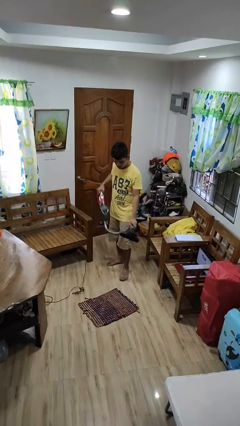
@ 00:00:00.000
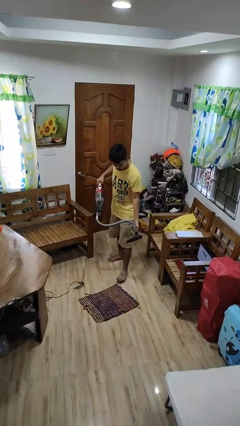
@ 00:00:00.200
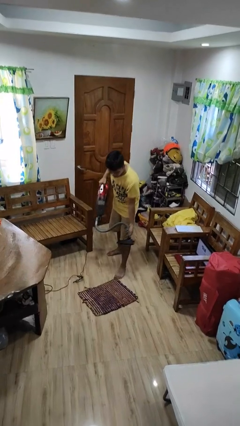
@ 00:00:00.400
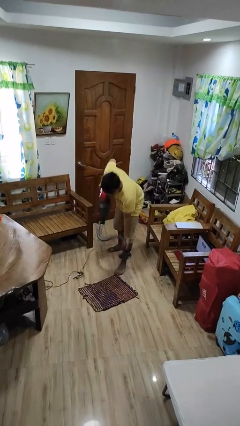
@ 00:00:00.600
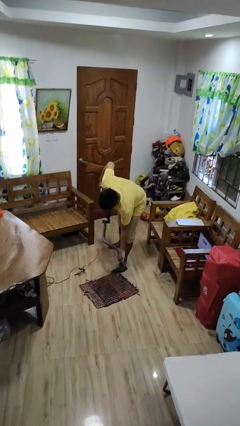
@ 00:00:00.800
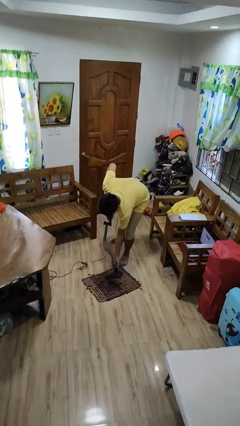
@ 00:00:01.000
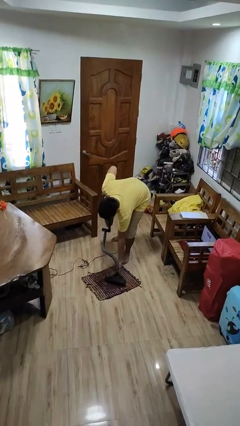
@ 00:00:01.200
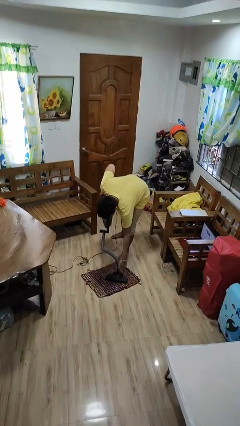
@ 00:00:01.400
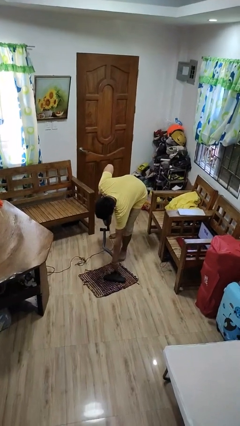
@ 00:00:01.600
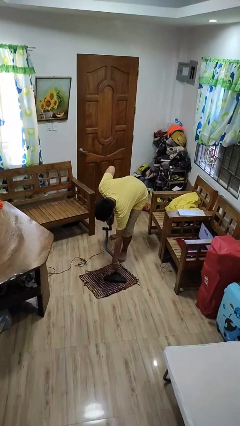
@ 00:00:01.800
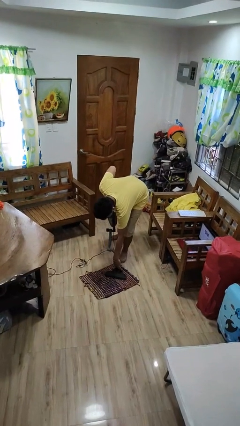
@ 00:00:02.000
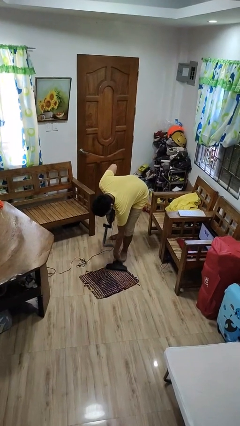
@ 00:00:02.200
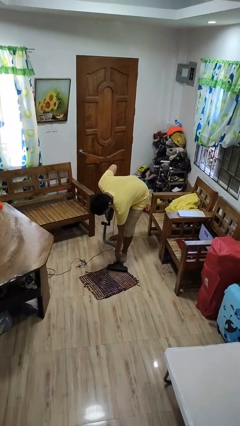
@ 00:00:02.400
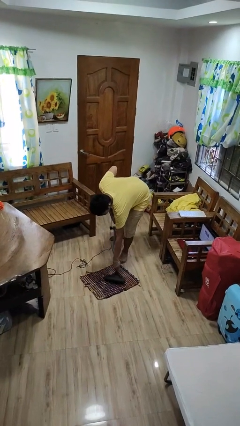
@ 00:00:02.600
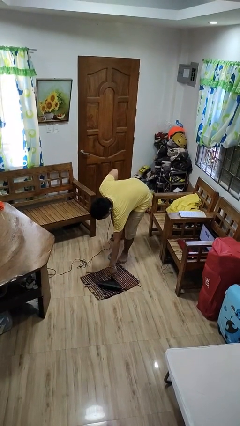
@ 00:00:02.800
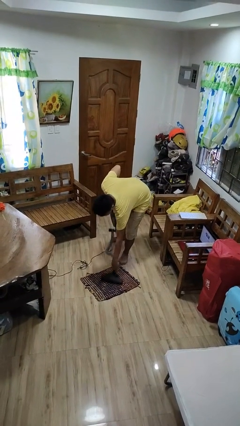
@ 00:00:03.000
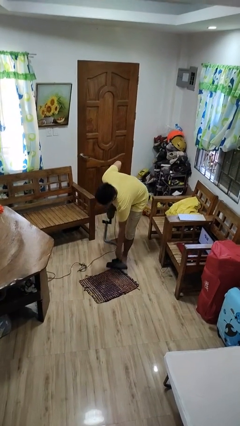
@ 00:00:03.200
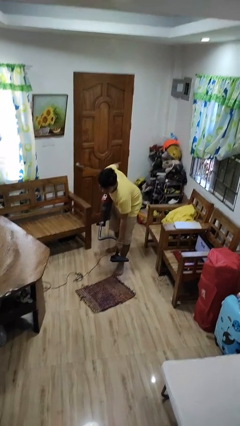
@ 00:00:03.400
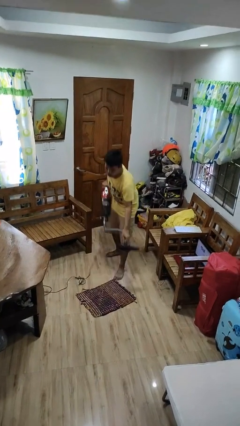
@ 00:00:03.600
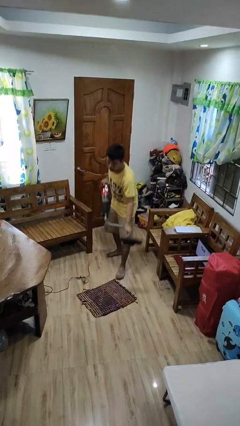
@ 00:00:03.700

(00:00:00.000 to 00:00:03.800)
person vacuums carpet

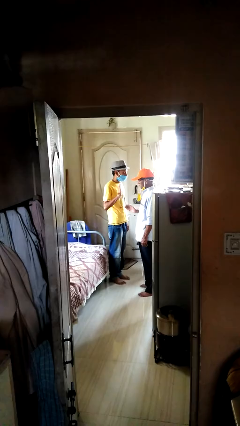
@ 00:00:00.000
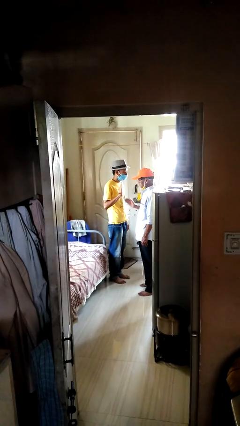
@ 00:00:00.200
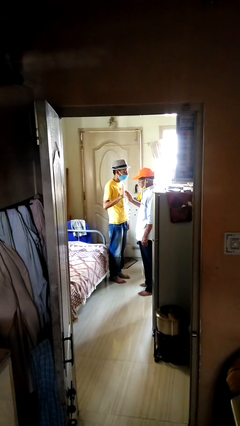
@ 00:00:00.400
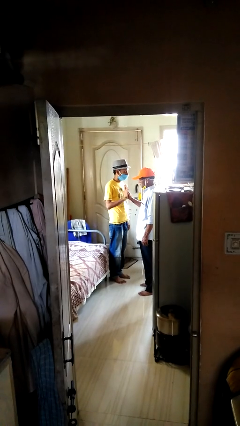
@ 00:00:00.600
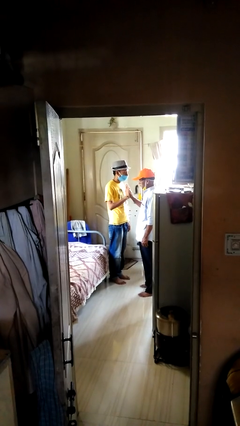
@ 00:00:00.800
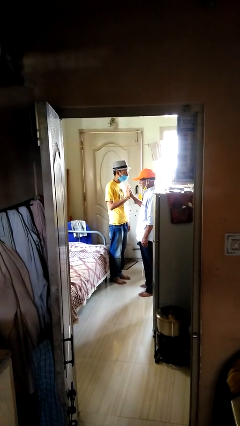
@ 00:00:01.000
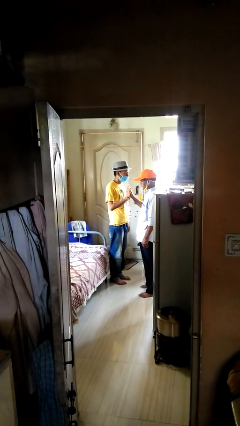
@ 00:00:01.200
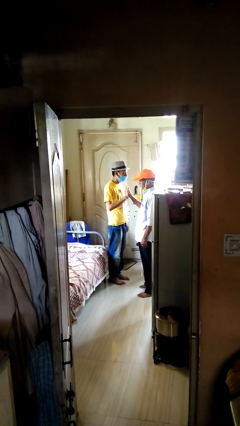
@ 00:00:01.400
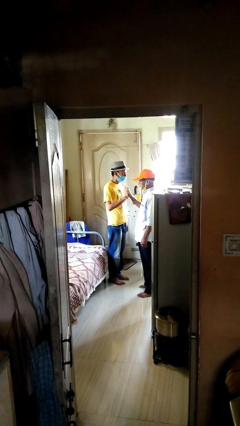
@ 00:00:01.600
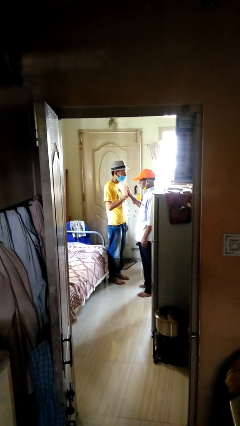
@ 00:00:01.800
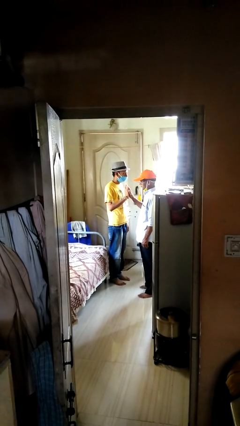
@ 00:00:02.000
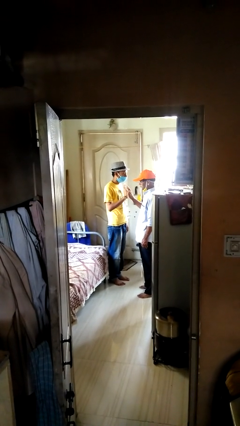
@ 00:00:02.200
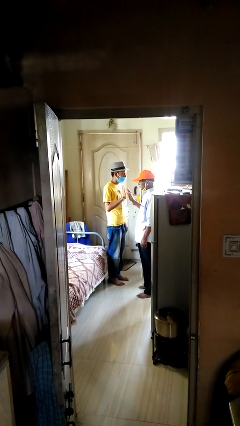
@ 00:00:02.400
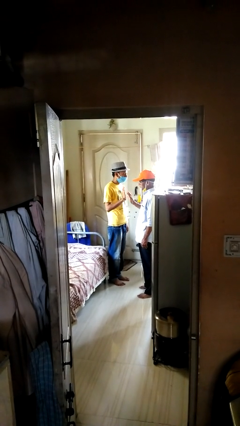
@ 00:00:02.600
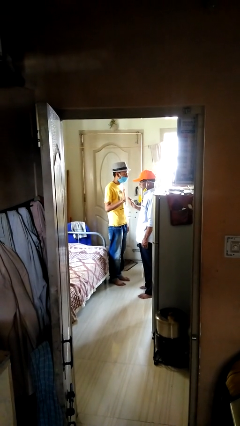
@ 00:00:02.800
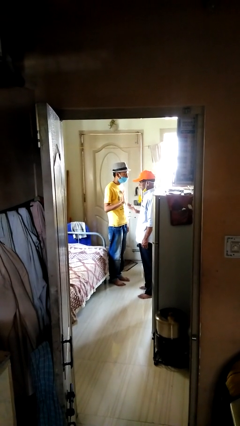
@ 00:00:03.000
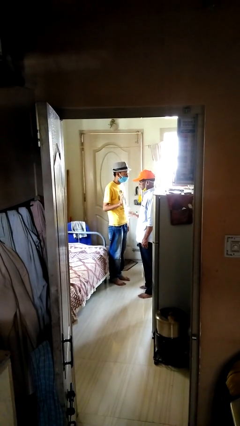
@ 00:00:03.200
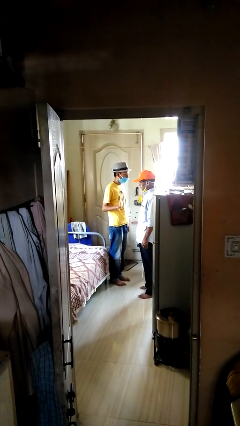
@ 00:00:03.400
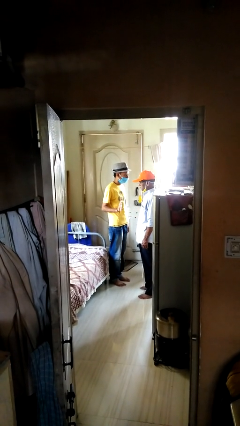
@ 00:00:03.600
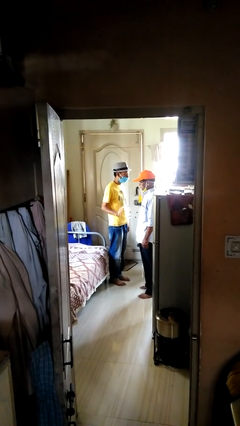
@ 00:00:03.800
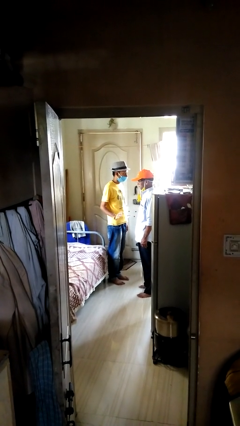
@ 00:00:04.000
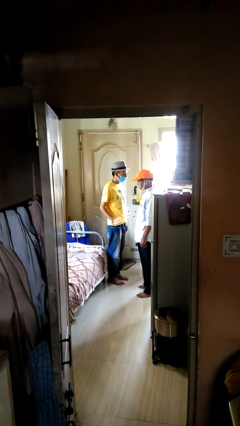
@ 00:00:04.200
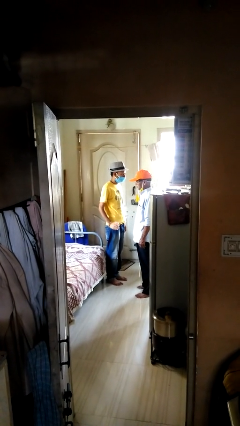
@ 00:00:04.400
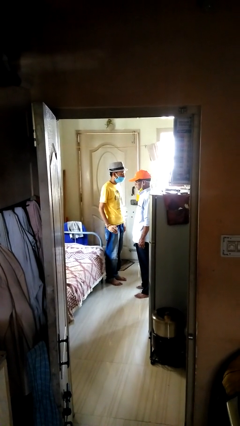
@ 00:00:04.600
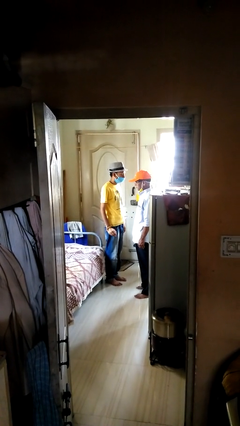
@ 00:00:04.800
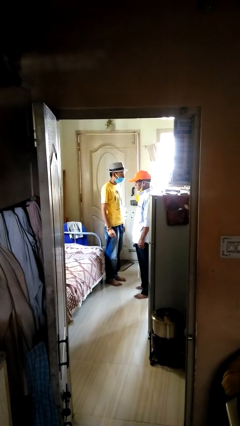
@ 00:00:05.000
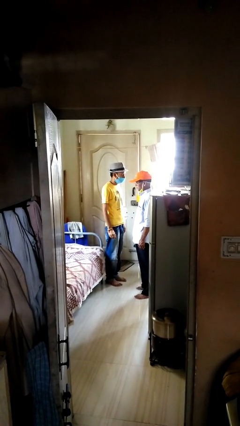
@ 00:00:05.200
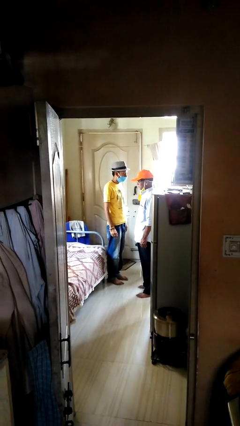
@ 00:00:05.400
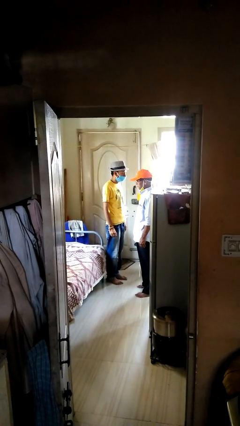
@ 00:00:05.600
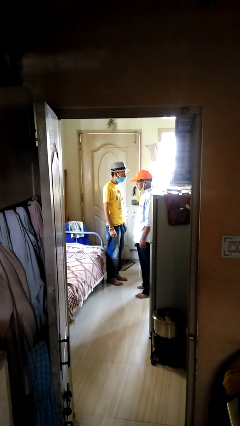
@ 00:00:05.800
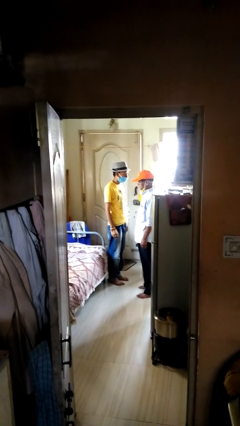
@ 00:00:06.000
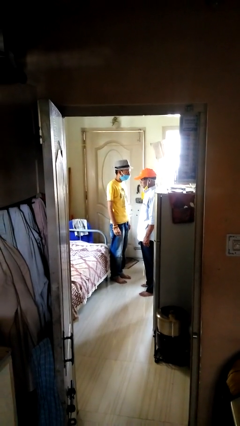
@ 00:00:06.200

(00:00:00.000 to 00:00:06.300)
person highfives hand

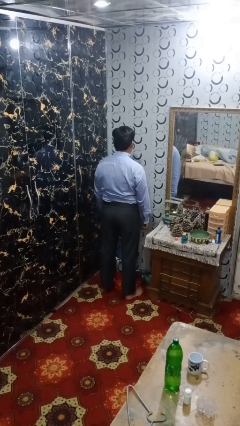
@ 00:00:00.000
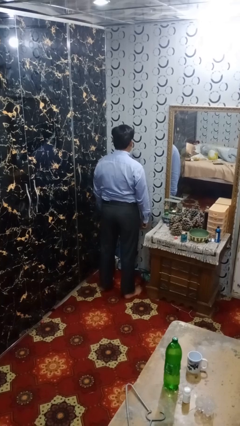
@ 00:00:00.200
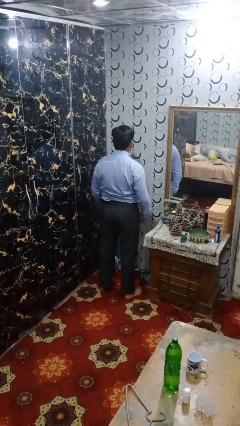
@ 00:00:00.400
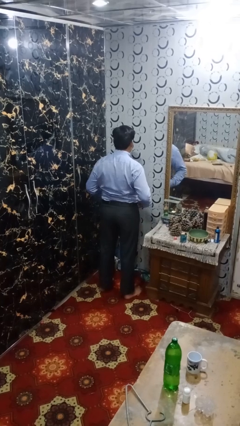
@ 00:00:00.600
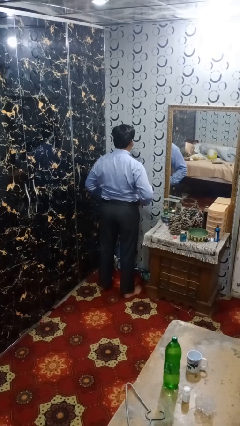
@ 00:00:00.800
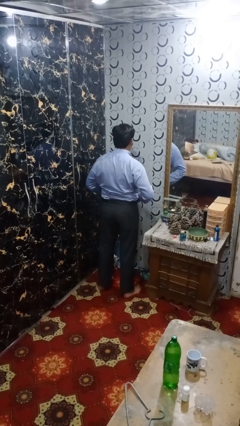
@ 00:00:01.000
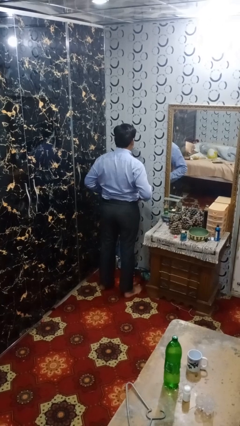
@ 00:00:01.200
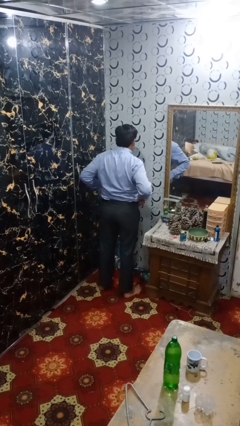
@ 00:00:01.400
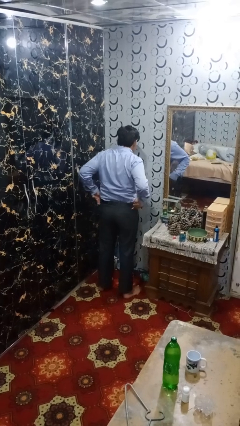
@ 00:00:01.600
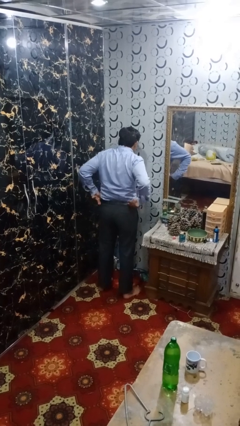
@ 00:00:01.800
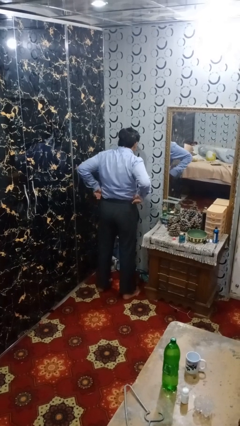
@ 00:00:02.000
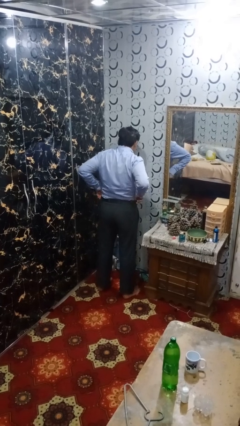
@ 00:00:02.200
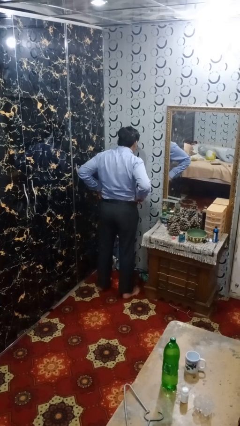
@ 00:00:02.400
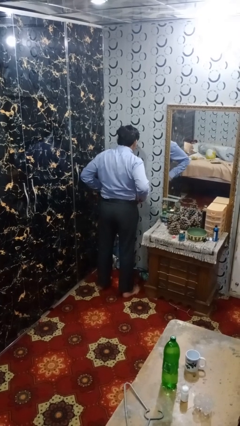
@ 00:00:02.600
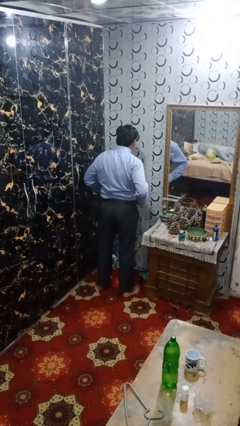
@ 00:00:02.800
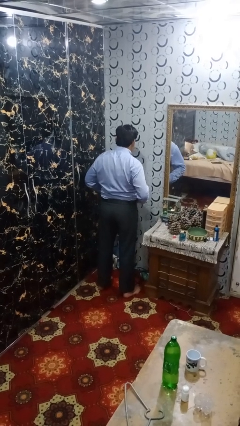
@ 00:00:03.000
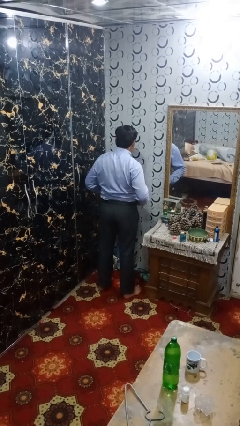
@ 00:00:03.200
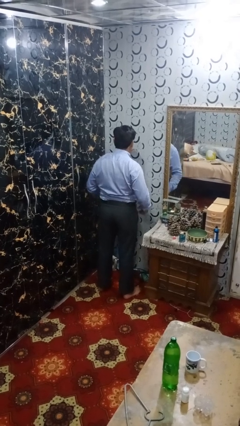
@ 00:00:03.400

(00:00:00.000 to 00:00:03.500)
person hikes up pants

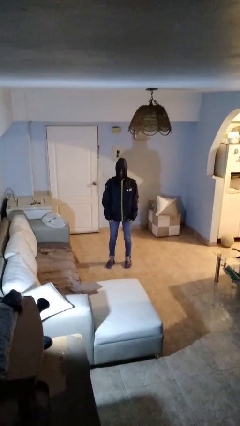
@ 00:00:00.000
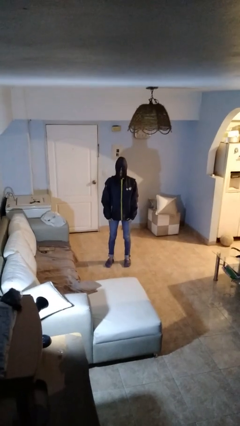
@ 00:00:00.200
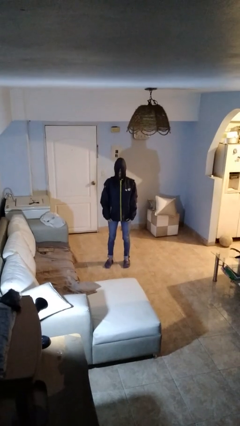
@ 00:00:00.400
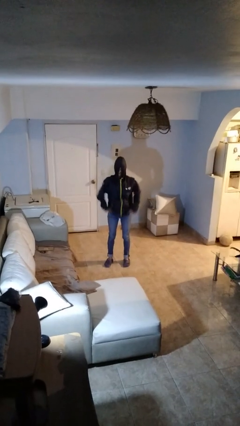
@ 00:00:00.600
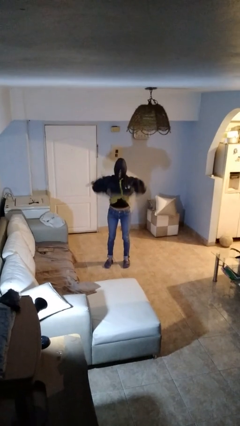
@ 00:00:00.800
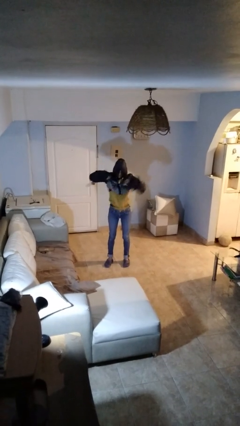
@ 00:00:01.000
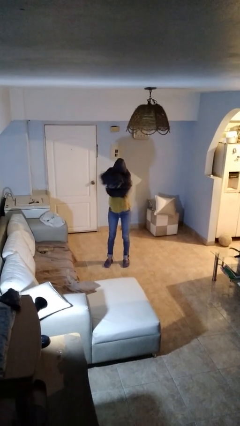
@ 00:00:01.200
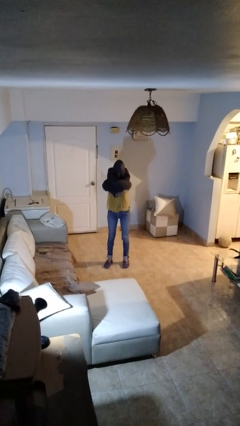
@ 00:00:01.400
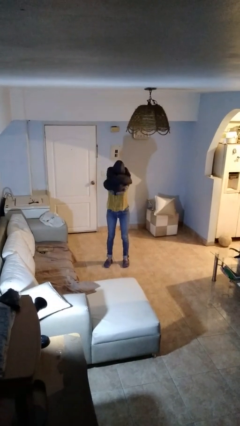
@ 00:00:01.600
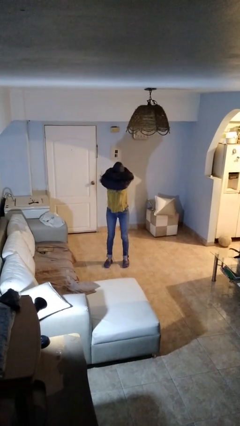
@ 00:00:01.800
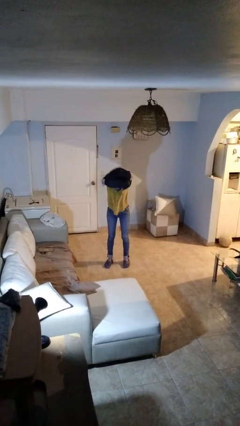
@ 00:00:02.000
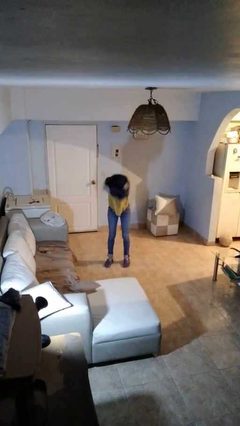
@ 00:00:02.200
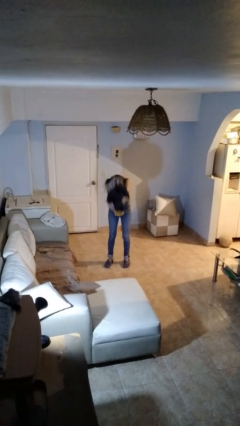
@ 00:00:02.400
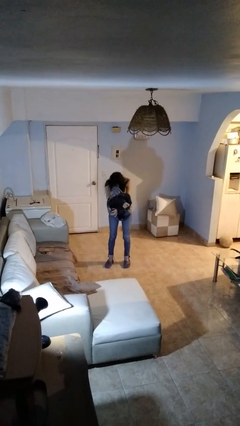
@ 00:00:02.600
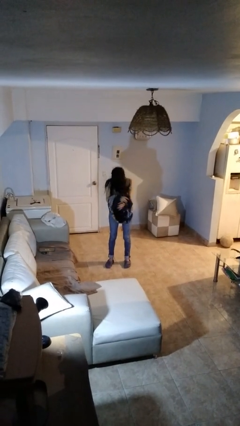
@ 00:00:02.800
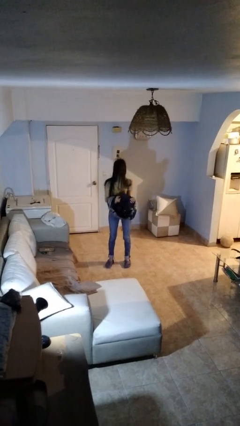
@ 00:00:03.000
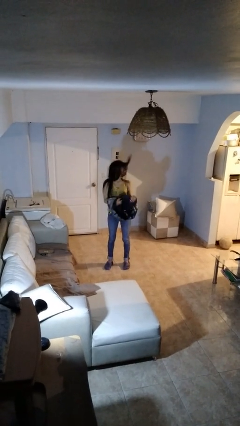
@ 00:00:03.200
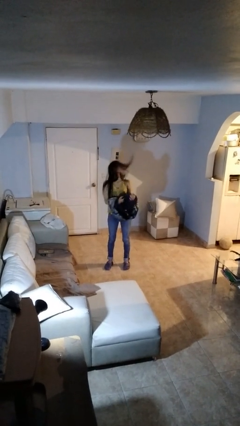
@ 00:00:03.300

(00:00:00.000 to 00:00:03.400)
person takes off hoodie

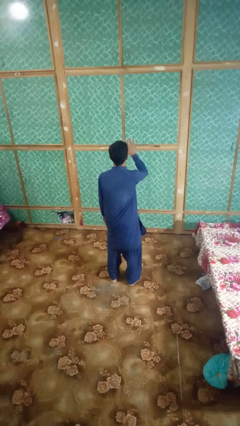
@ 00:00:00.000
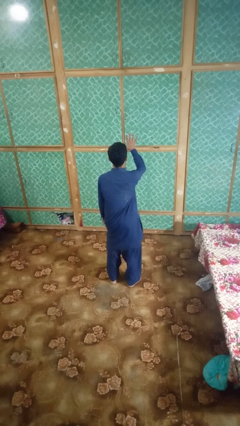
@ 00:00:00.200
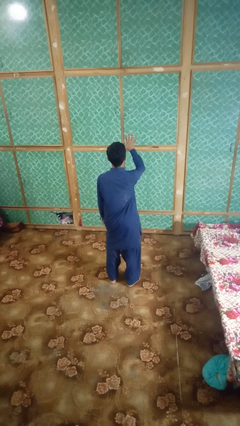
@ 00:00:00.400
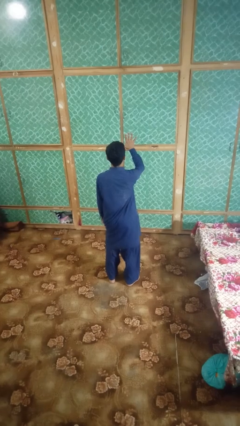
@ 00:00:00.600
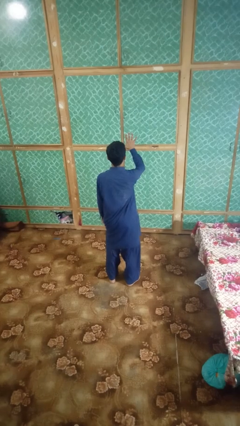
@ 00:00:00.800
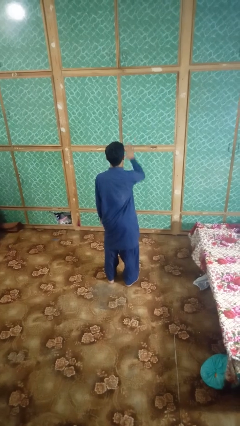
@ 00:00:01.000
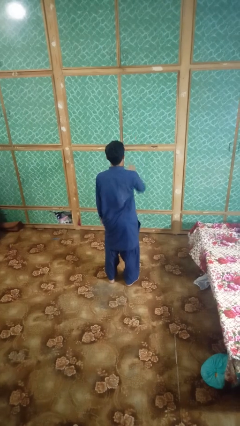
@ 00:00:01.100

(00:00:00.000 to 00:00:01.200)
person gestures number five
